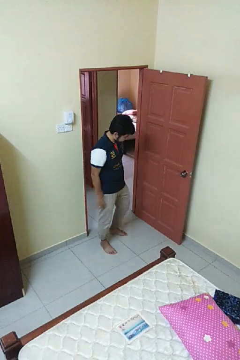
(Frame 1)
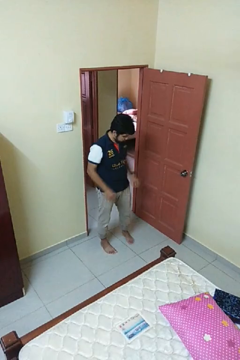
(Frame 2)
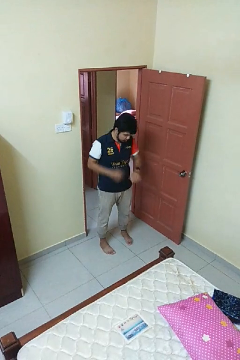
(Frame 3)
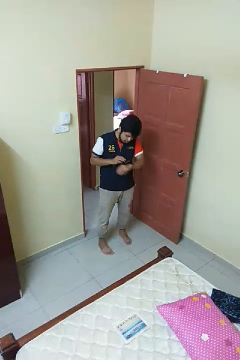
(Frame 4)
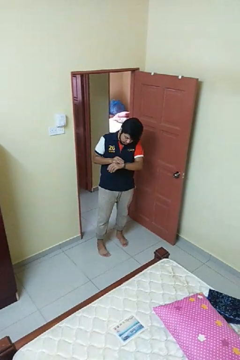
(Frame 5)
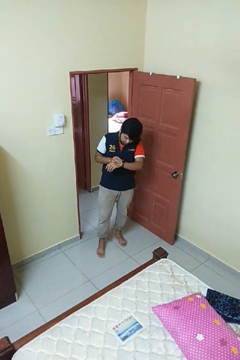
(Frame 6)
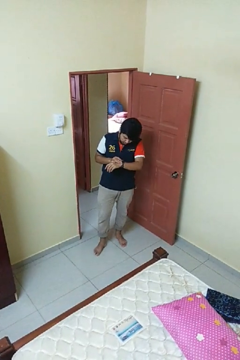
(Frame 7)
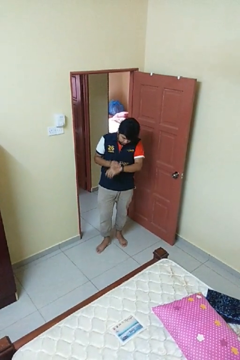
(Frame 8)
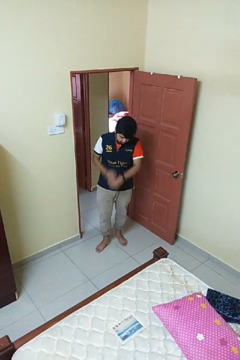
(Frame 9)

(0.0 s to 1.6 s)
person looks at wristwatch

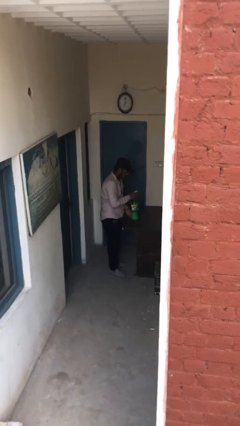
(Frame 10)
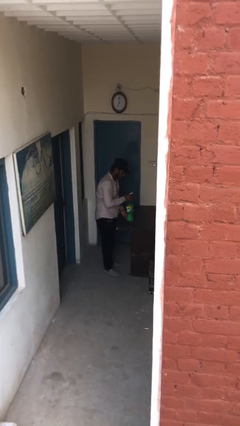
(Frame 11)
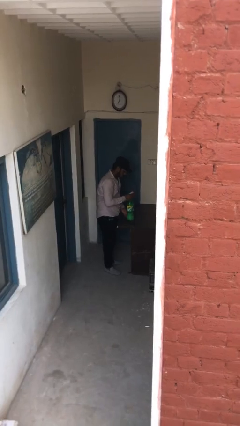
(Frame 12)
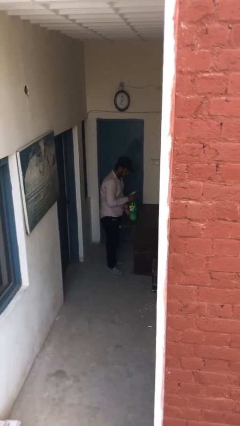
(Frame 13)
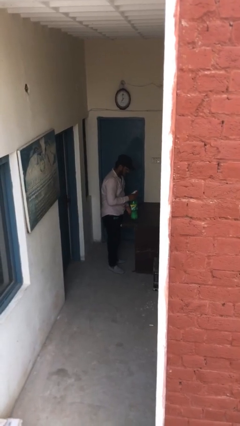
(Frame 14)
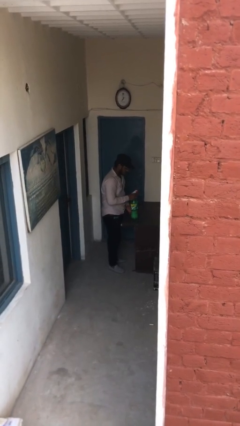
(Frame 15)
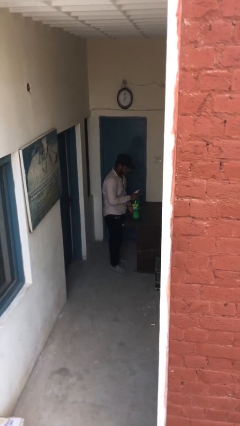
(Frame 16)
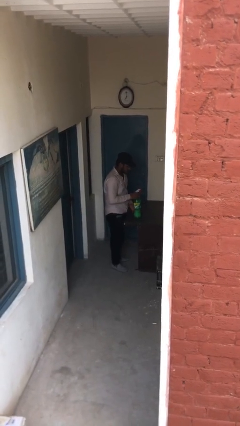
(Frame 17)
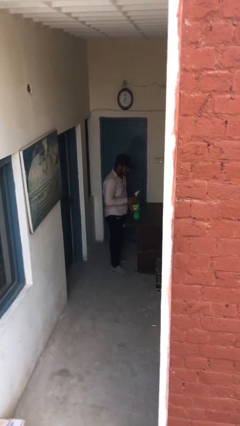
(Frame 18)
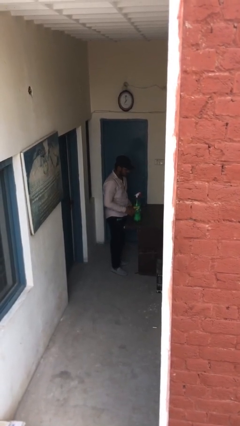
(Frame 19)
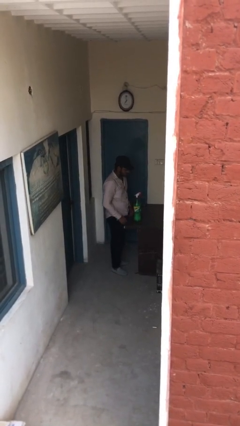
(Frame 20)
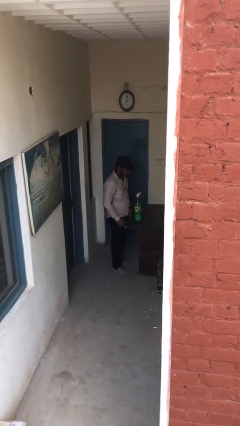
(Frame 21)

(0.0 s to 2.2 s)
person puts down object on table

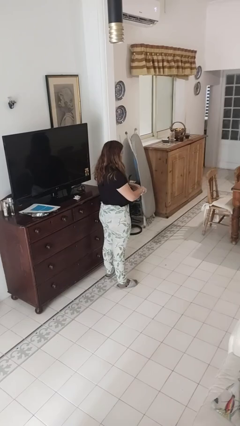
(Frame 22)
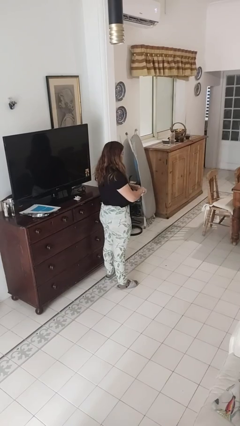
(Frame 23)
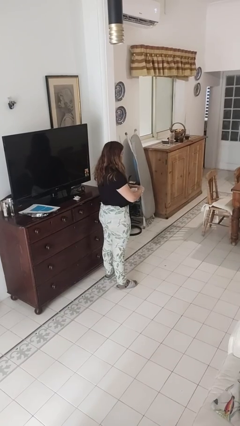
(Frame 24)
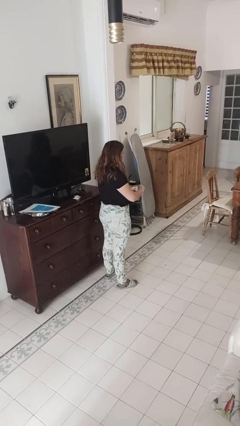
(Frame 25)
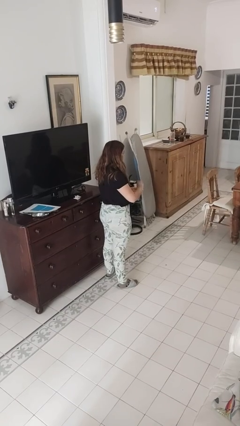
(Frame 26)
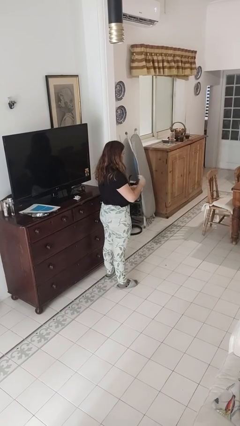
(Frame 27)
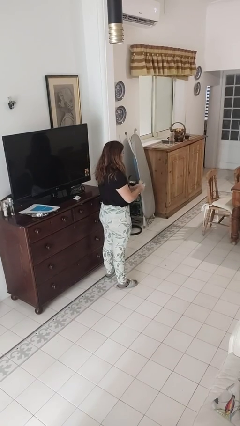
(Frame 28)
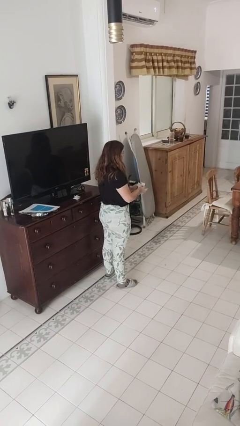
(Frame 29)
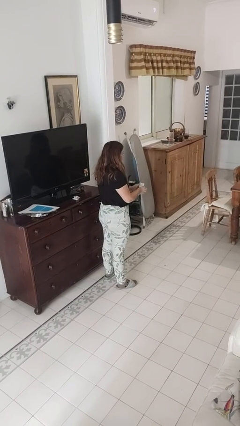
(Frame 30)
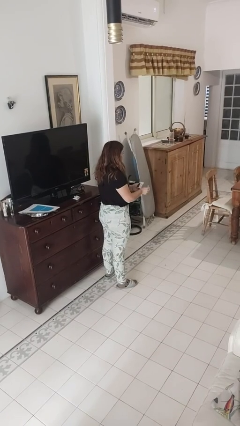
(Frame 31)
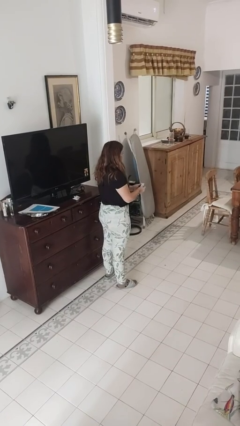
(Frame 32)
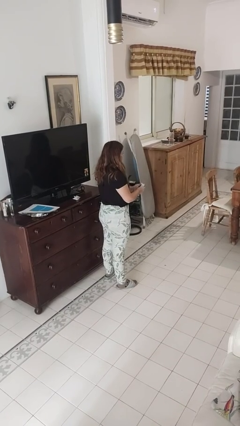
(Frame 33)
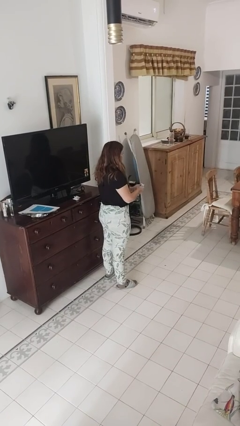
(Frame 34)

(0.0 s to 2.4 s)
person tears paper

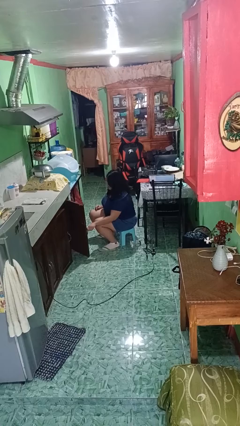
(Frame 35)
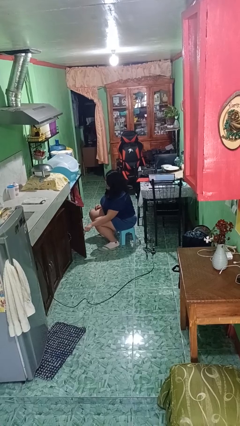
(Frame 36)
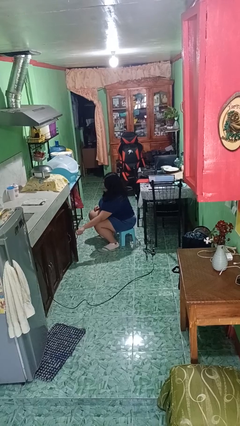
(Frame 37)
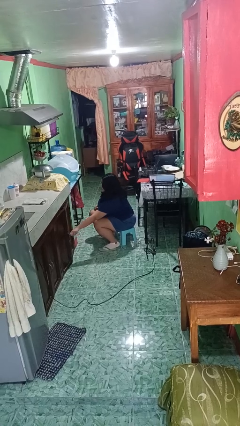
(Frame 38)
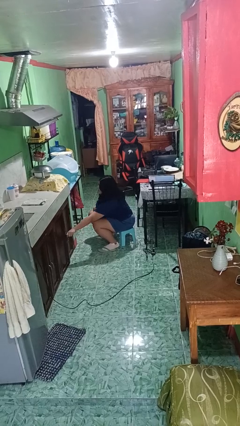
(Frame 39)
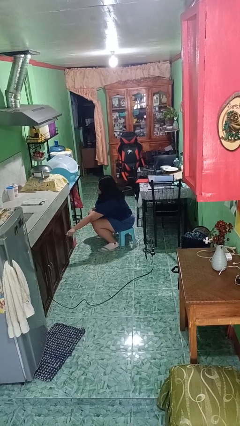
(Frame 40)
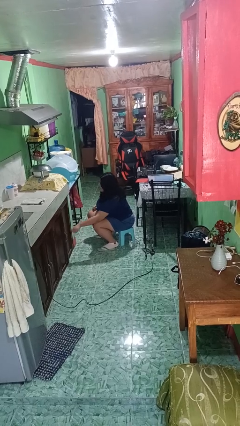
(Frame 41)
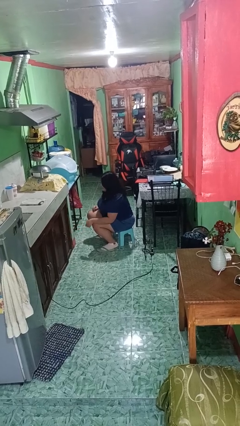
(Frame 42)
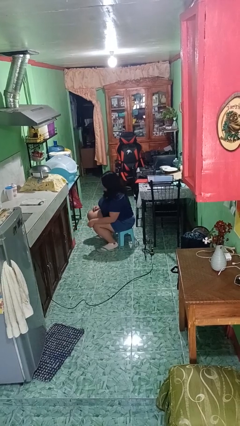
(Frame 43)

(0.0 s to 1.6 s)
person closes cabinet

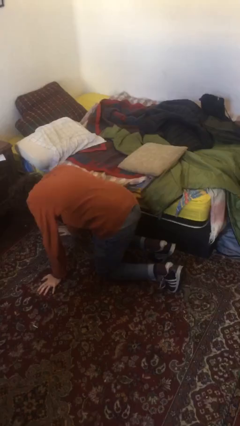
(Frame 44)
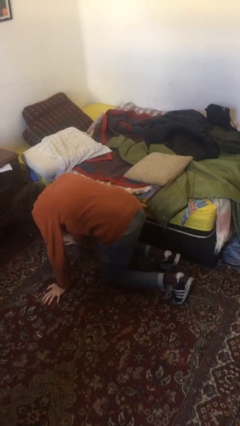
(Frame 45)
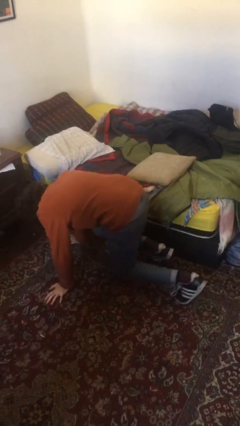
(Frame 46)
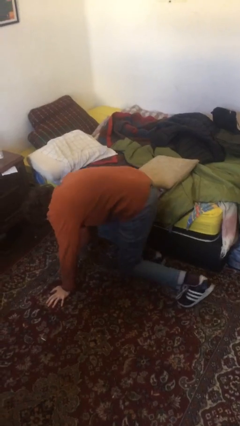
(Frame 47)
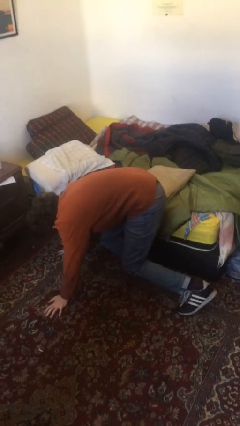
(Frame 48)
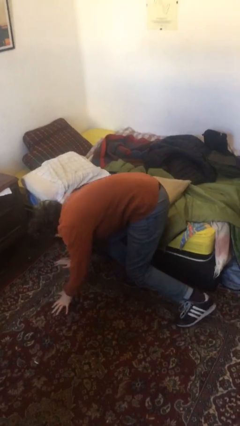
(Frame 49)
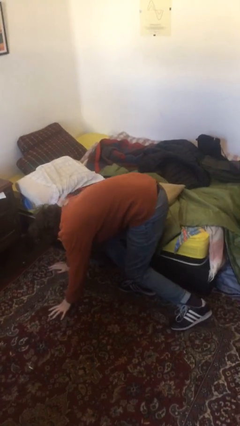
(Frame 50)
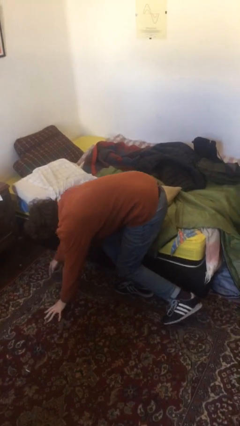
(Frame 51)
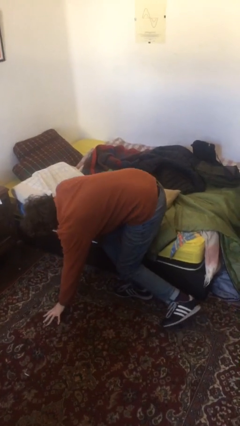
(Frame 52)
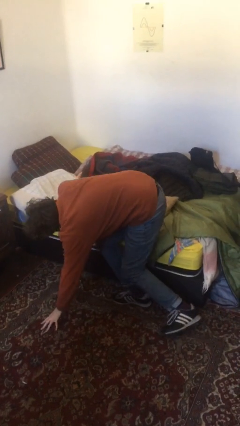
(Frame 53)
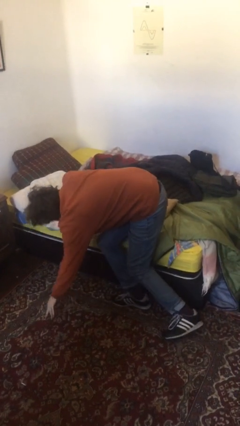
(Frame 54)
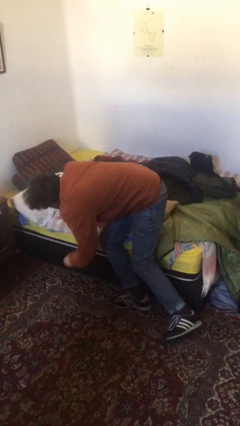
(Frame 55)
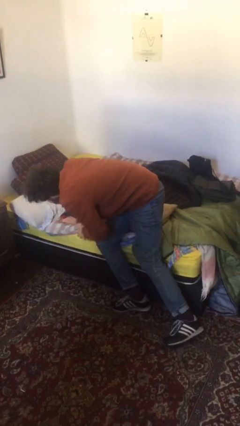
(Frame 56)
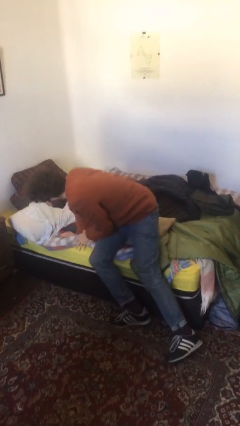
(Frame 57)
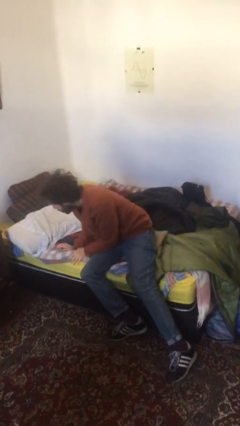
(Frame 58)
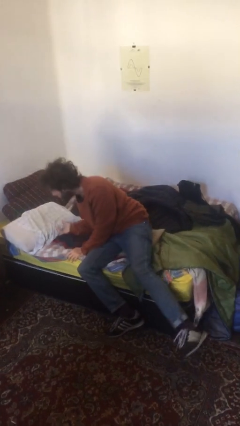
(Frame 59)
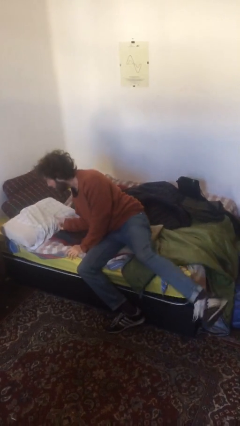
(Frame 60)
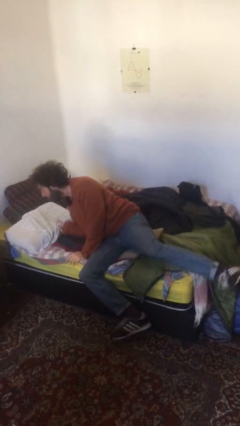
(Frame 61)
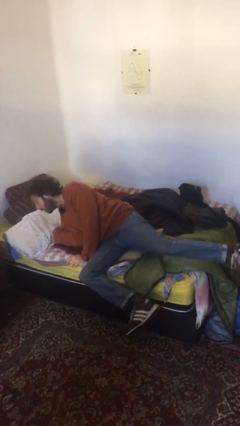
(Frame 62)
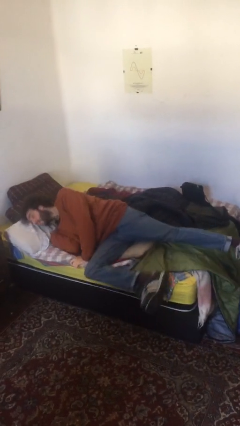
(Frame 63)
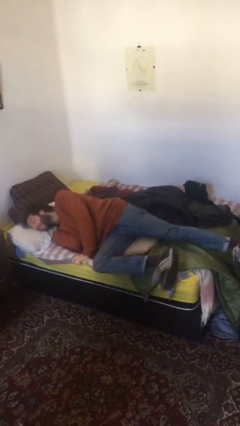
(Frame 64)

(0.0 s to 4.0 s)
person stands up from floor

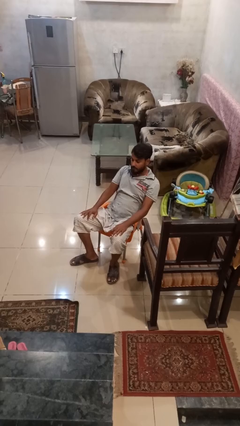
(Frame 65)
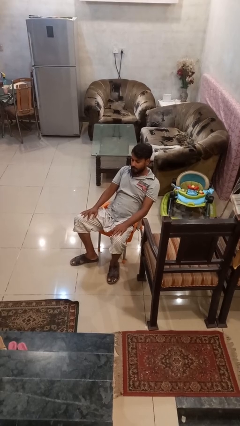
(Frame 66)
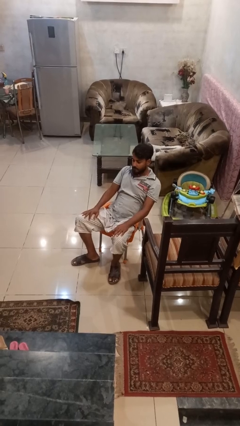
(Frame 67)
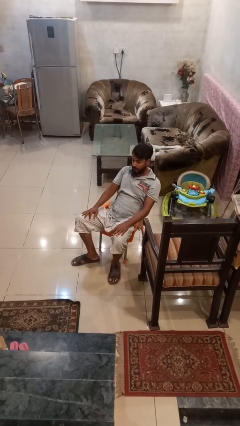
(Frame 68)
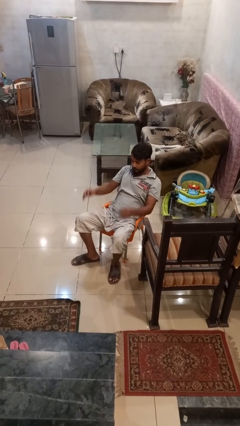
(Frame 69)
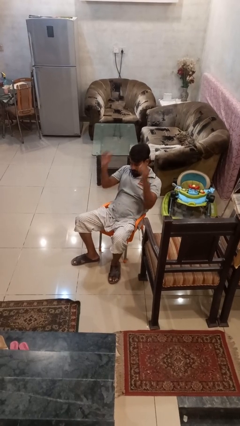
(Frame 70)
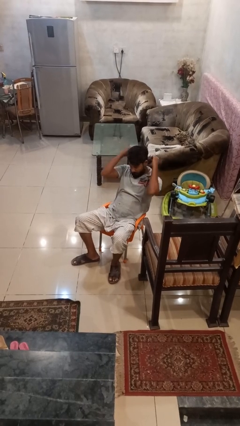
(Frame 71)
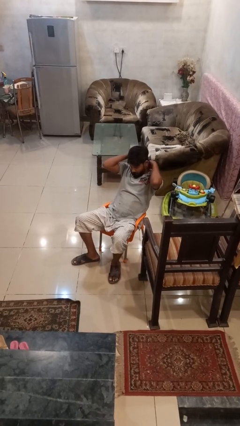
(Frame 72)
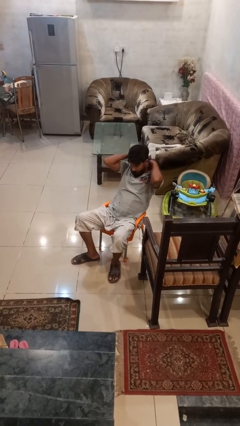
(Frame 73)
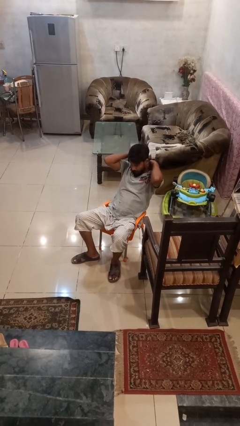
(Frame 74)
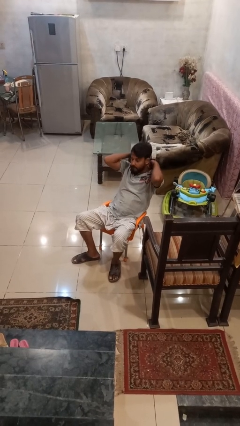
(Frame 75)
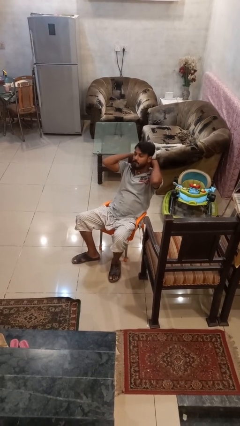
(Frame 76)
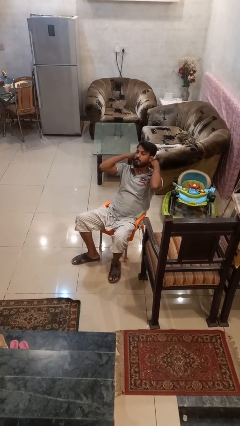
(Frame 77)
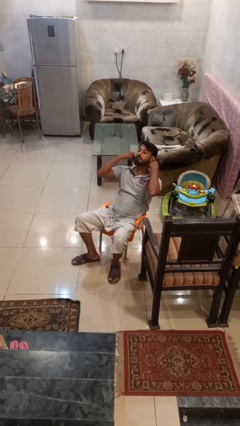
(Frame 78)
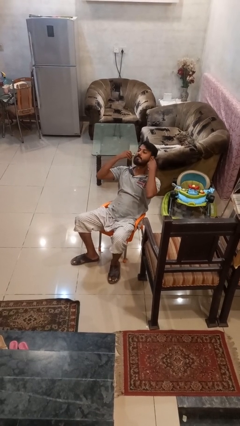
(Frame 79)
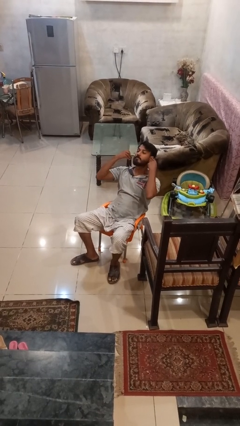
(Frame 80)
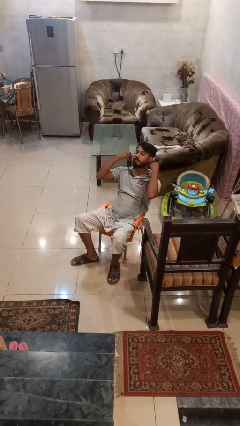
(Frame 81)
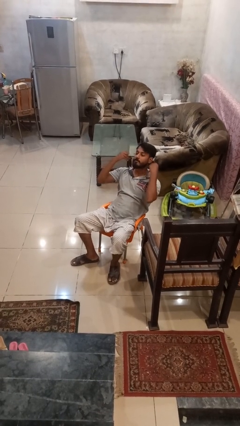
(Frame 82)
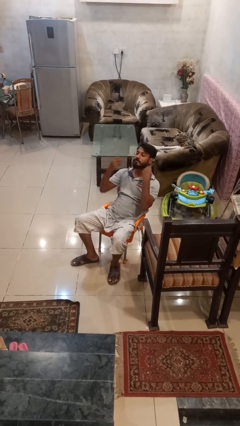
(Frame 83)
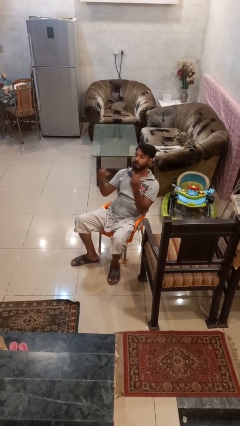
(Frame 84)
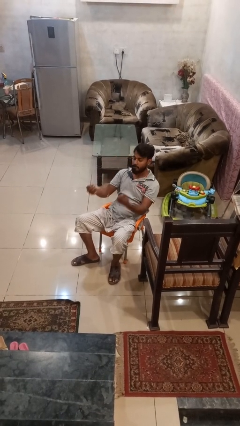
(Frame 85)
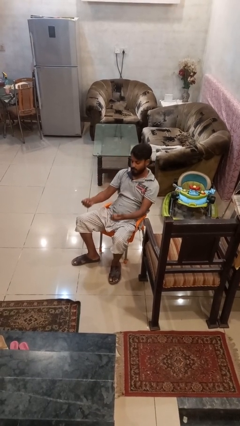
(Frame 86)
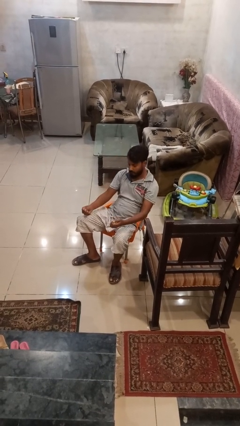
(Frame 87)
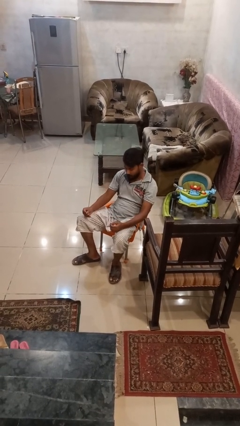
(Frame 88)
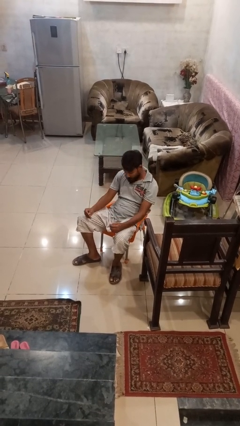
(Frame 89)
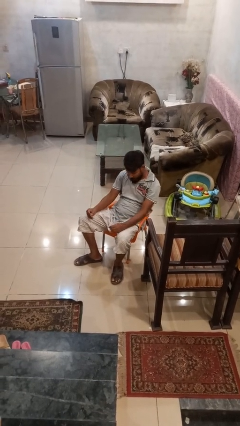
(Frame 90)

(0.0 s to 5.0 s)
person takes off necklace

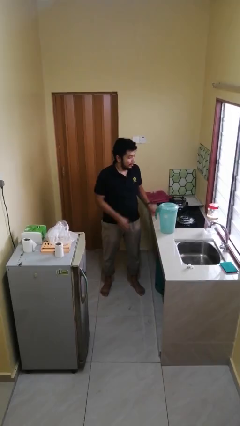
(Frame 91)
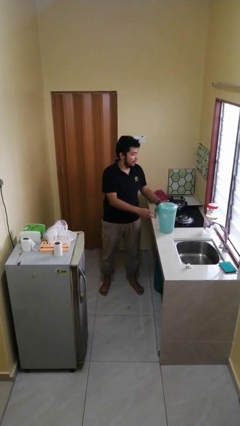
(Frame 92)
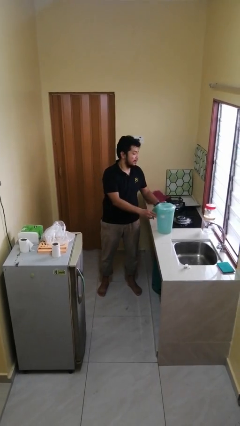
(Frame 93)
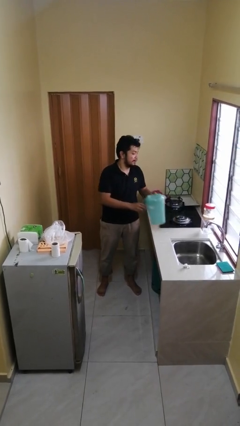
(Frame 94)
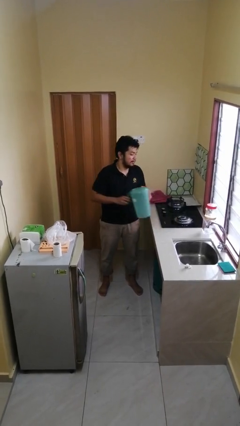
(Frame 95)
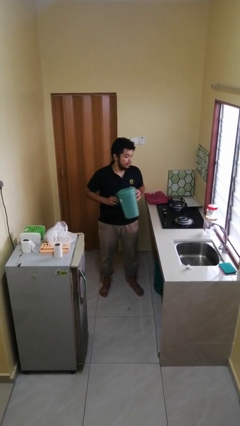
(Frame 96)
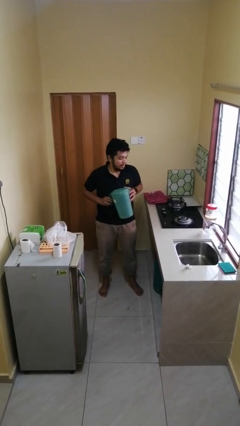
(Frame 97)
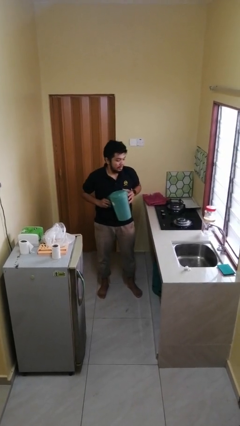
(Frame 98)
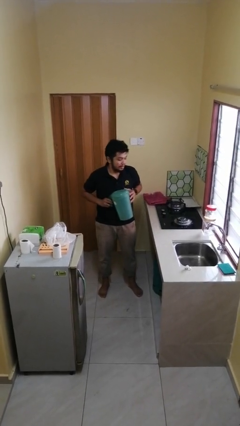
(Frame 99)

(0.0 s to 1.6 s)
person picks up object from countertop
